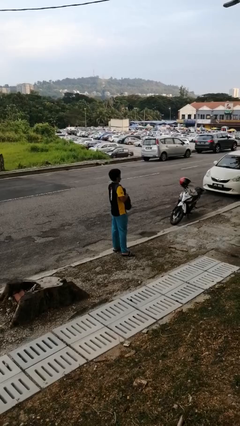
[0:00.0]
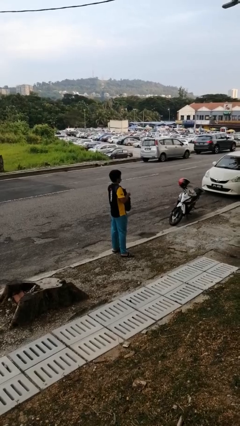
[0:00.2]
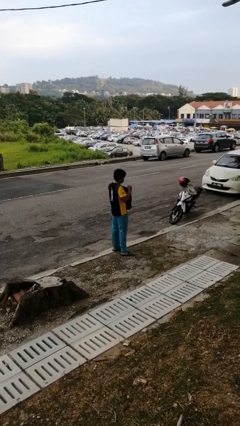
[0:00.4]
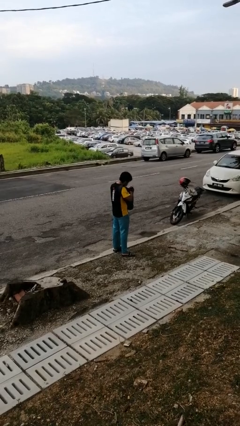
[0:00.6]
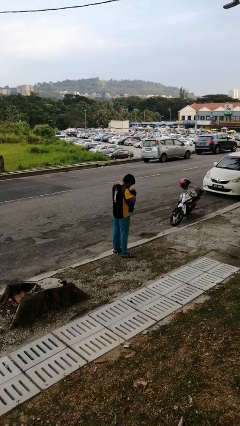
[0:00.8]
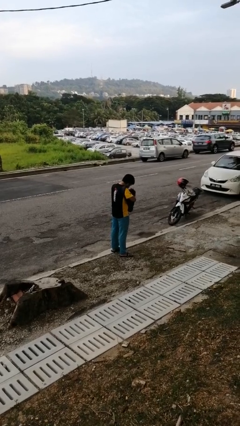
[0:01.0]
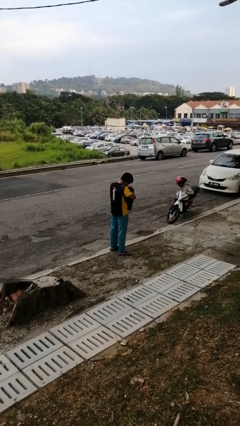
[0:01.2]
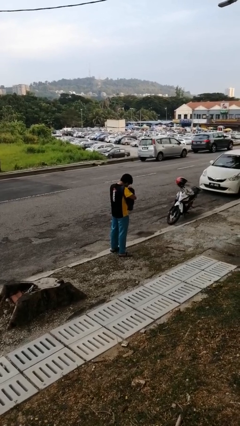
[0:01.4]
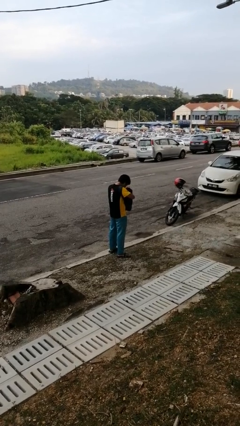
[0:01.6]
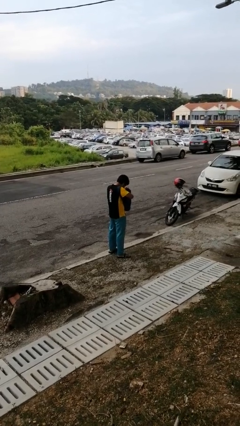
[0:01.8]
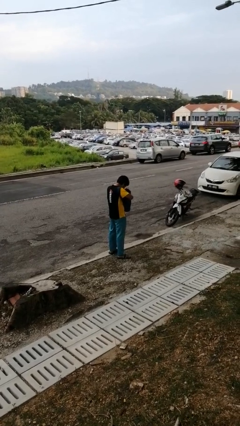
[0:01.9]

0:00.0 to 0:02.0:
person searches in backpack

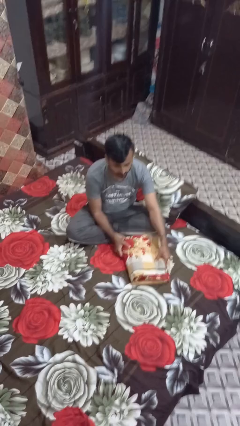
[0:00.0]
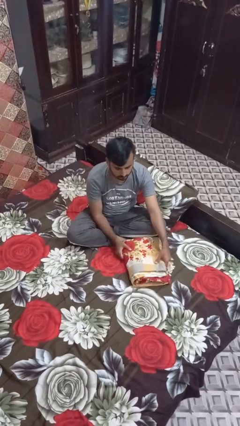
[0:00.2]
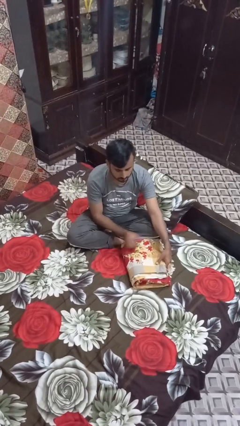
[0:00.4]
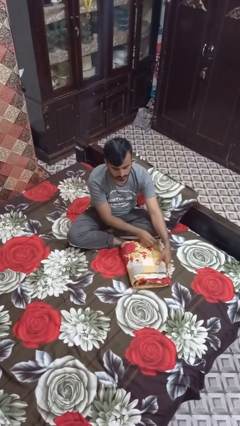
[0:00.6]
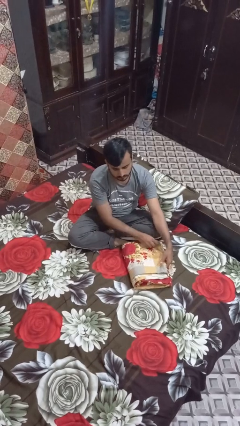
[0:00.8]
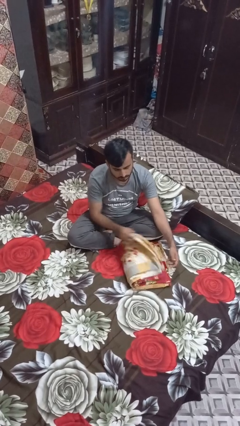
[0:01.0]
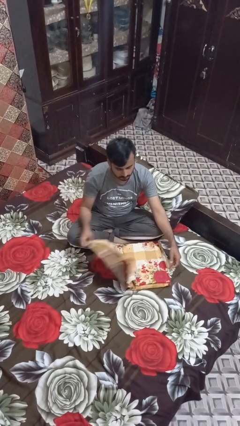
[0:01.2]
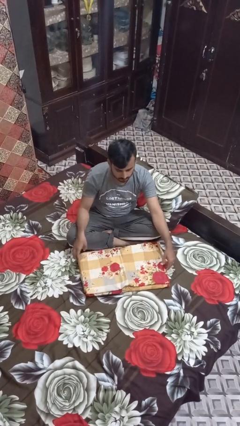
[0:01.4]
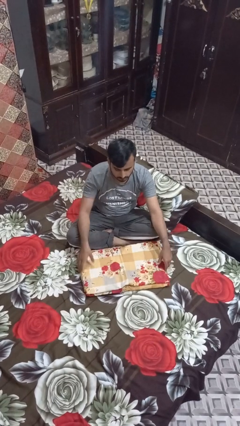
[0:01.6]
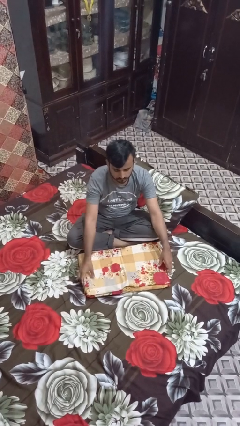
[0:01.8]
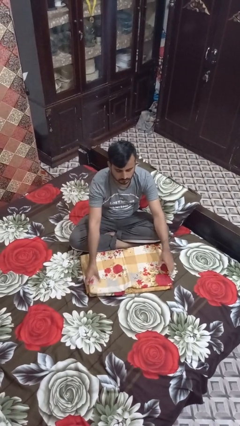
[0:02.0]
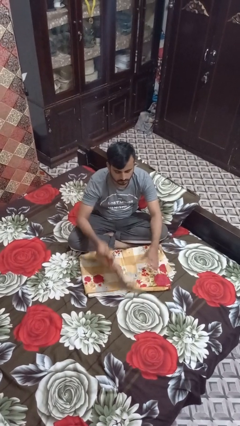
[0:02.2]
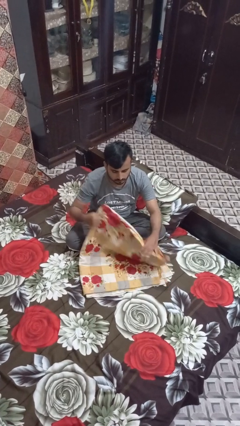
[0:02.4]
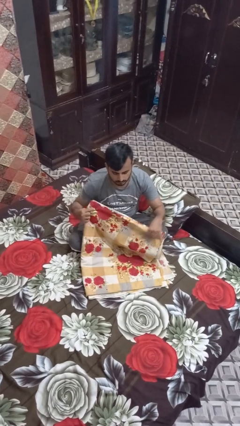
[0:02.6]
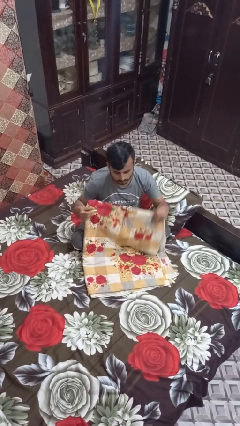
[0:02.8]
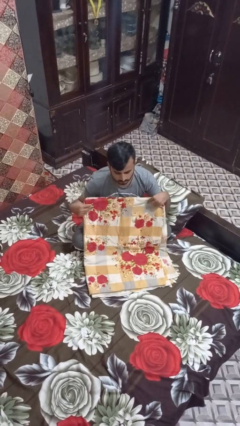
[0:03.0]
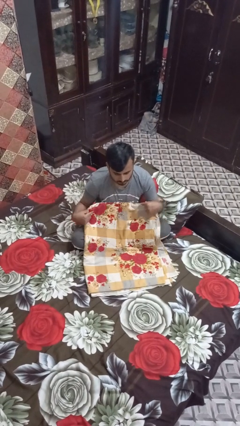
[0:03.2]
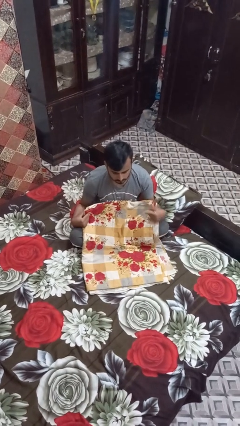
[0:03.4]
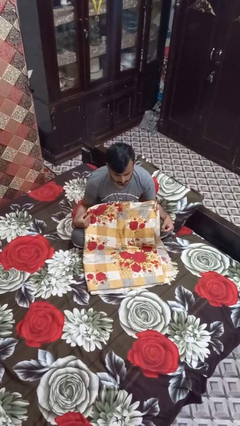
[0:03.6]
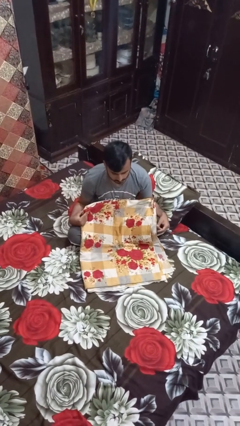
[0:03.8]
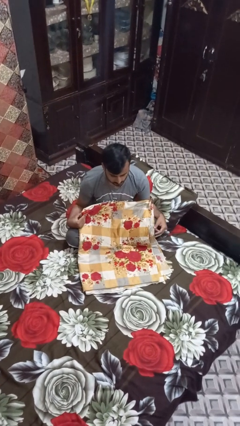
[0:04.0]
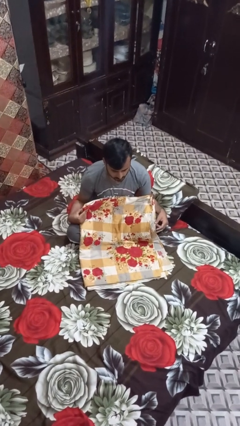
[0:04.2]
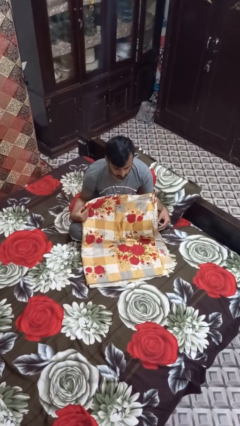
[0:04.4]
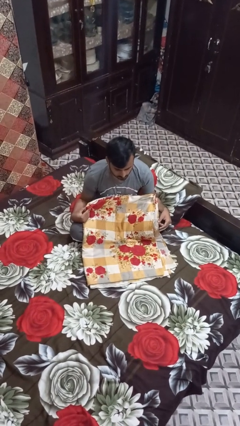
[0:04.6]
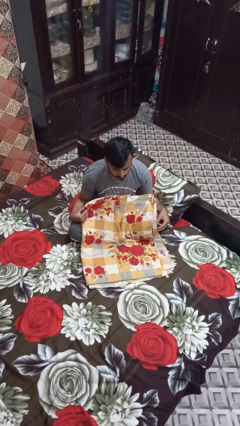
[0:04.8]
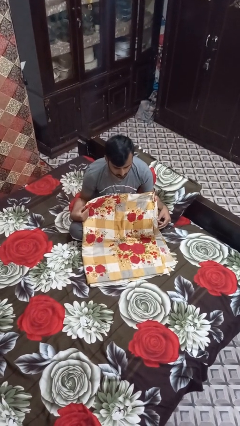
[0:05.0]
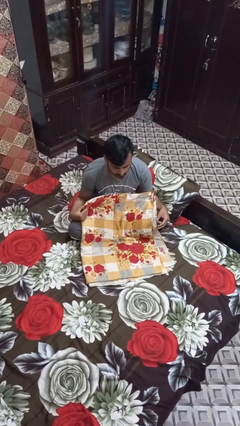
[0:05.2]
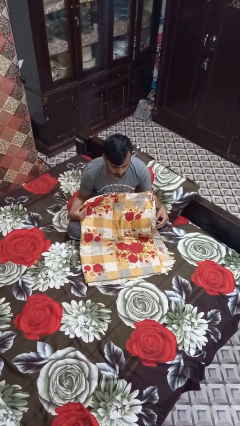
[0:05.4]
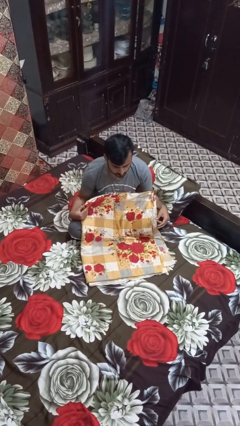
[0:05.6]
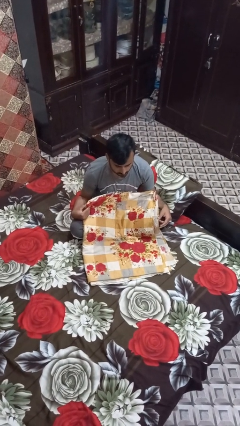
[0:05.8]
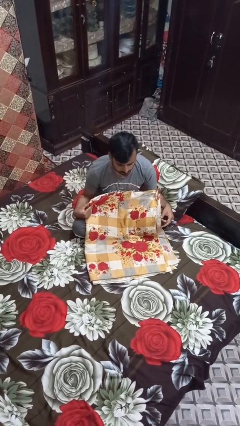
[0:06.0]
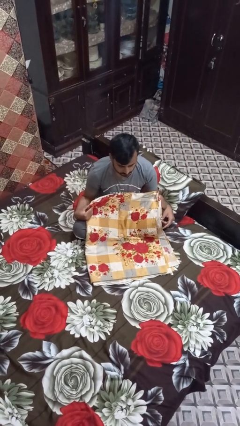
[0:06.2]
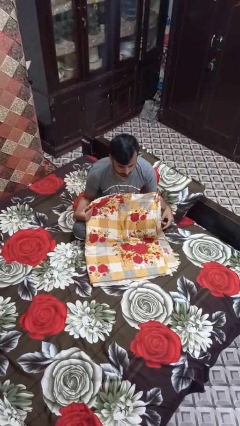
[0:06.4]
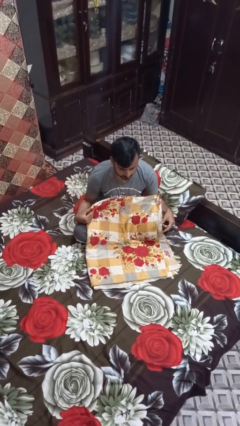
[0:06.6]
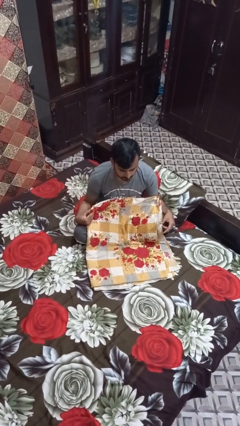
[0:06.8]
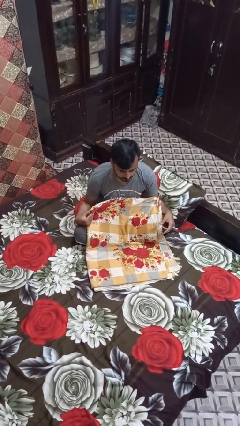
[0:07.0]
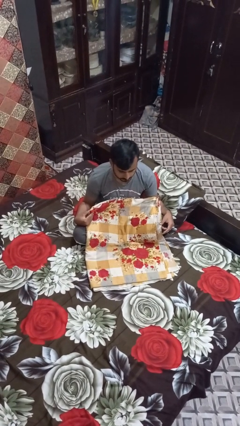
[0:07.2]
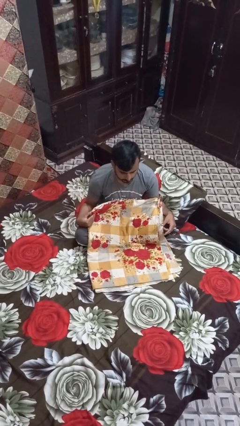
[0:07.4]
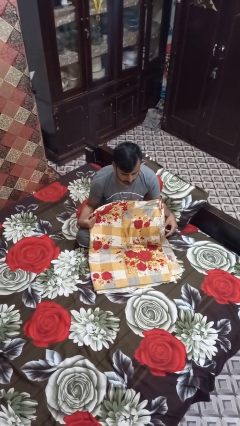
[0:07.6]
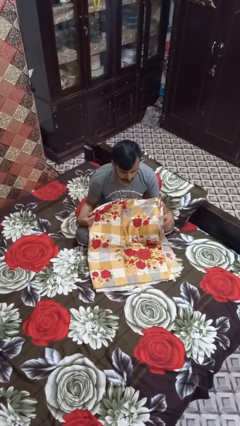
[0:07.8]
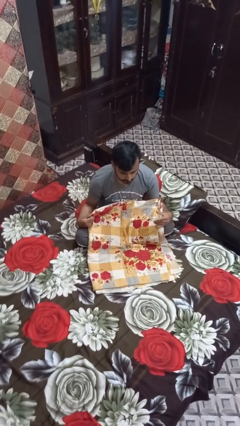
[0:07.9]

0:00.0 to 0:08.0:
person unfolds blanket

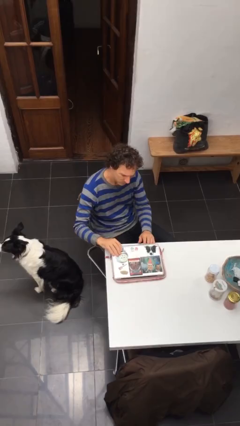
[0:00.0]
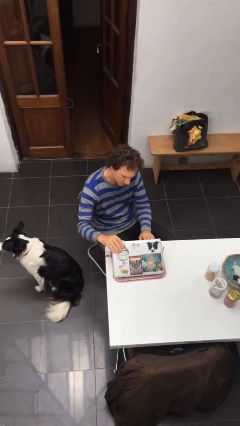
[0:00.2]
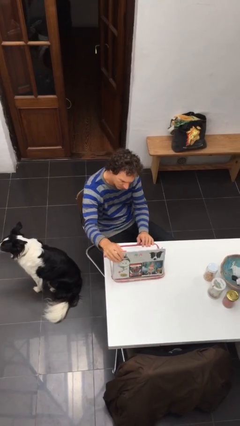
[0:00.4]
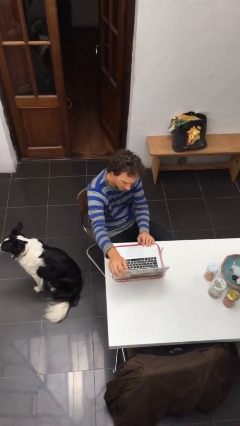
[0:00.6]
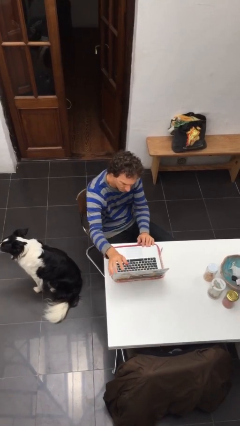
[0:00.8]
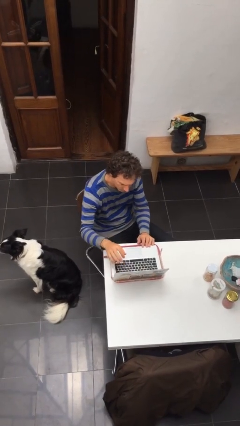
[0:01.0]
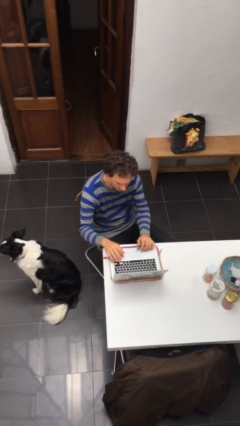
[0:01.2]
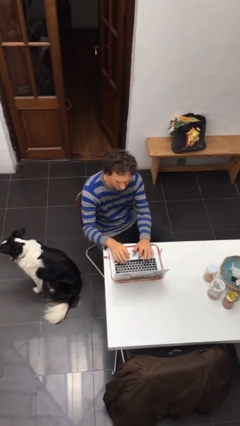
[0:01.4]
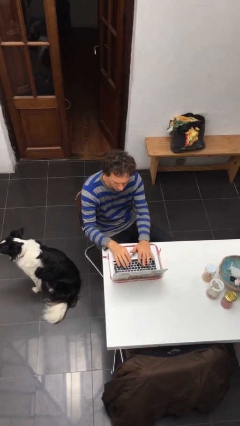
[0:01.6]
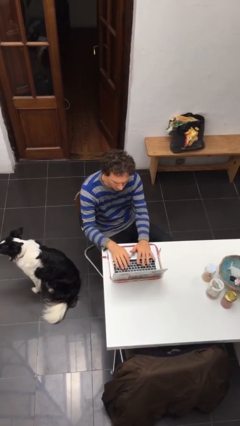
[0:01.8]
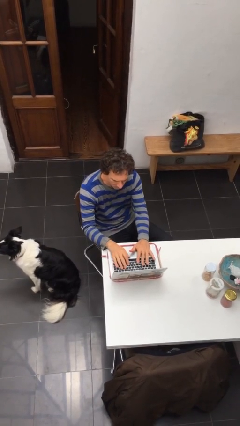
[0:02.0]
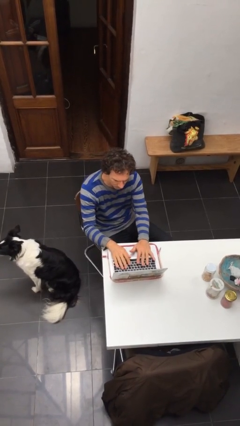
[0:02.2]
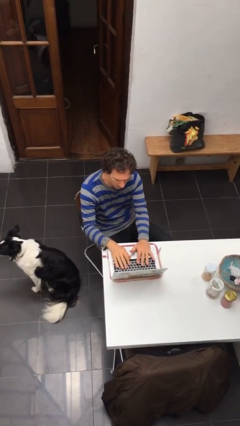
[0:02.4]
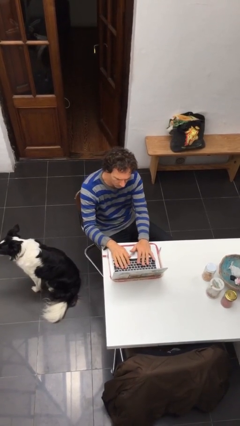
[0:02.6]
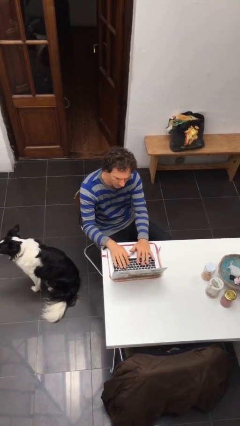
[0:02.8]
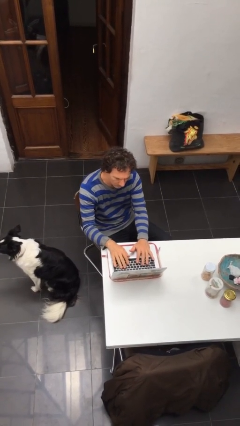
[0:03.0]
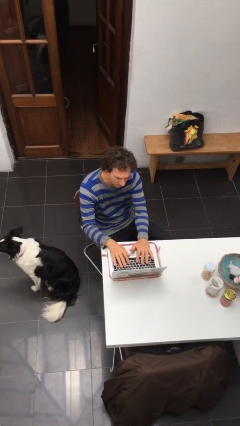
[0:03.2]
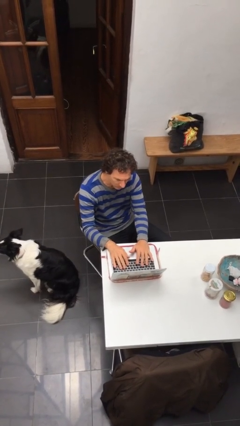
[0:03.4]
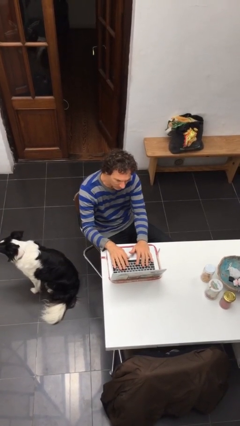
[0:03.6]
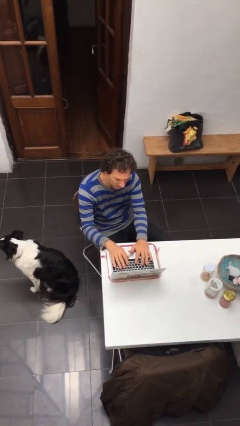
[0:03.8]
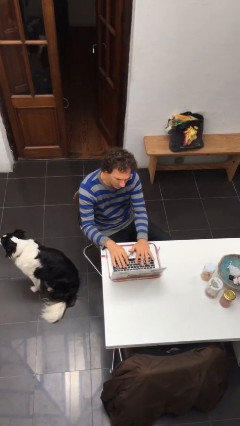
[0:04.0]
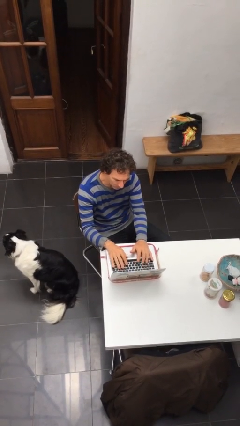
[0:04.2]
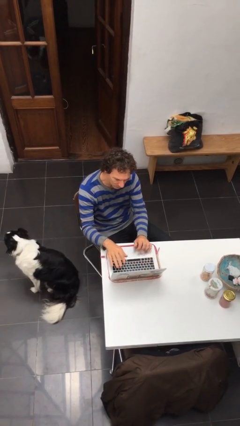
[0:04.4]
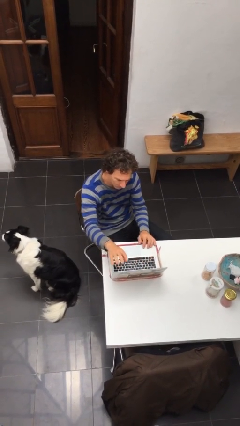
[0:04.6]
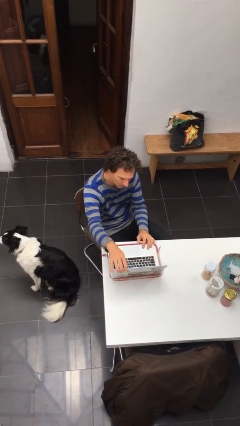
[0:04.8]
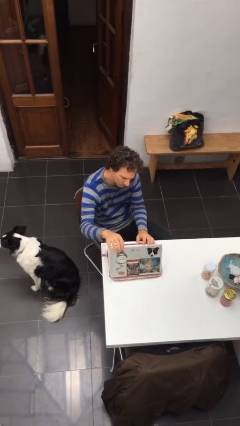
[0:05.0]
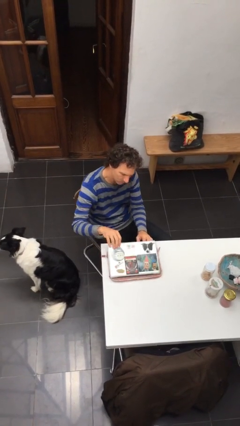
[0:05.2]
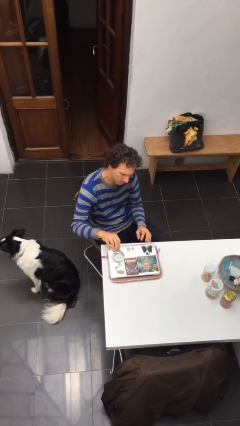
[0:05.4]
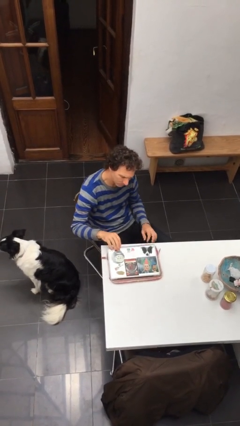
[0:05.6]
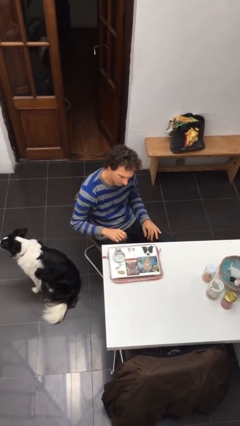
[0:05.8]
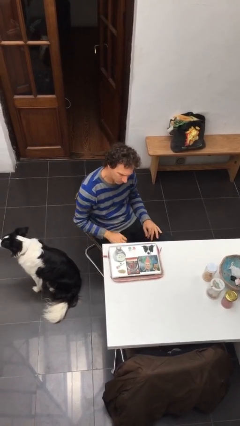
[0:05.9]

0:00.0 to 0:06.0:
person interacts with laptop

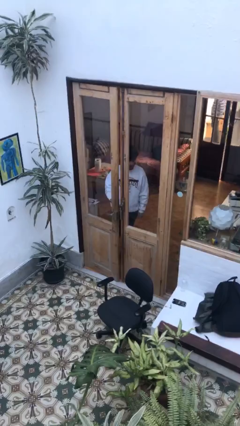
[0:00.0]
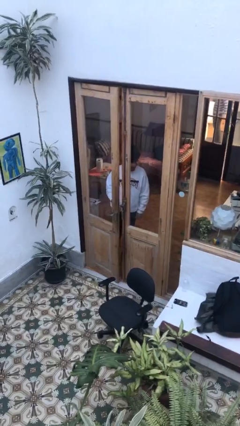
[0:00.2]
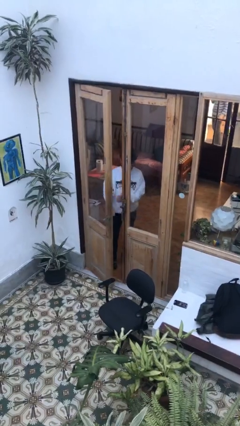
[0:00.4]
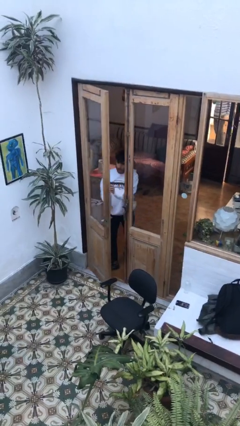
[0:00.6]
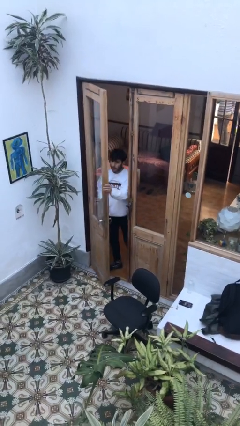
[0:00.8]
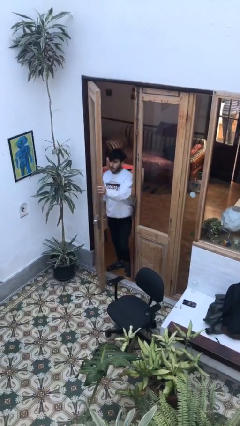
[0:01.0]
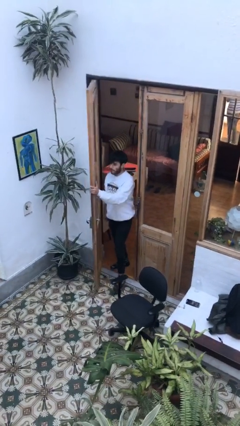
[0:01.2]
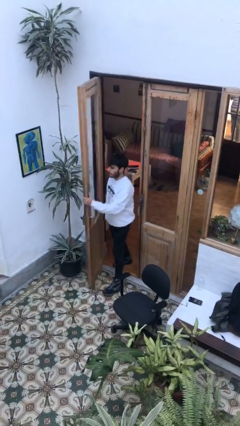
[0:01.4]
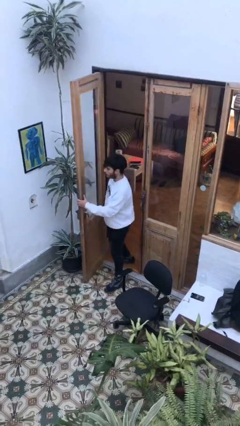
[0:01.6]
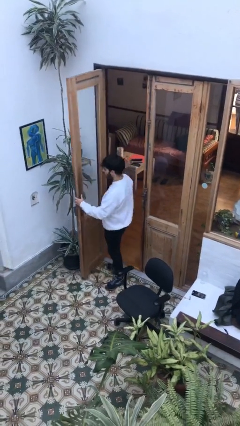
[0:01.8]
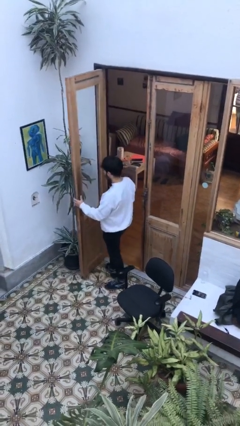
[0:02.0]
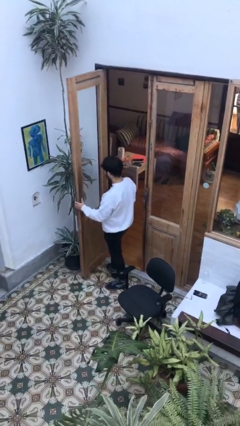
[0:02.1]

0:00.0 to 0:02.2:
person opens facility door
